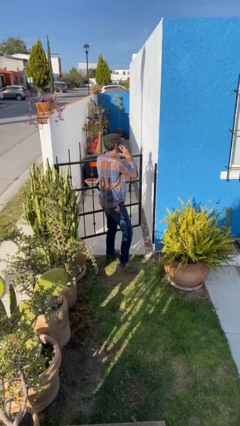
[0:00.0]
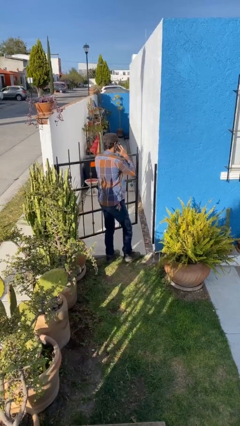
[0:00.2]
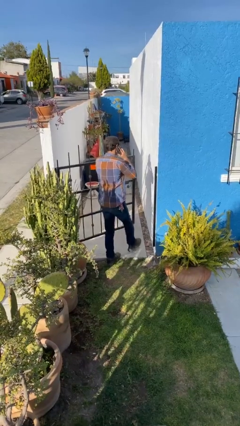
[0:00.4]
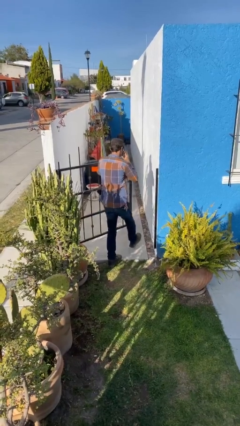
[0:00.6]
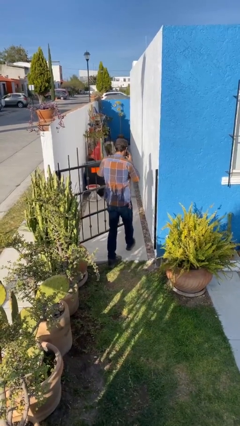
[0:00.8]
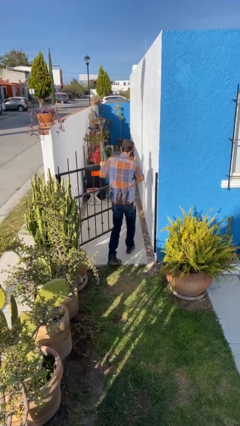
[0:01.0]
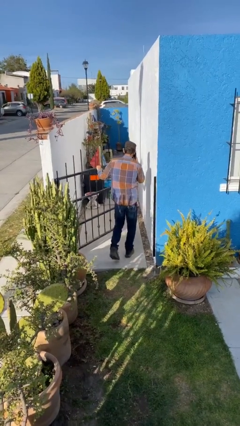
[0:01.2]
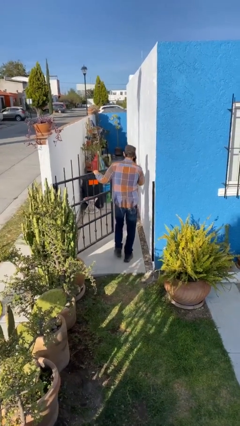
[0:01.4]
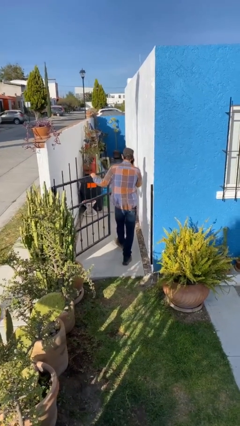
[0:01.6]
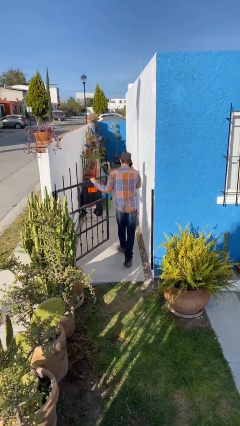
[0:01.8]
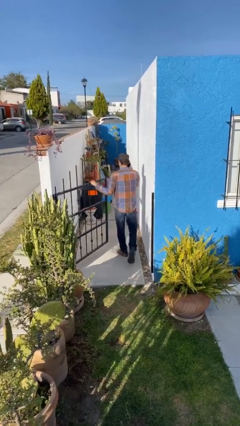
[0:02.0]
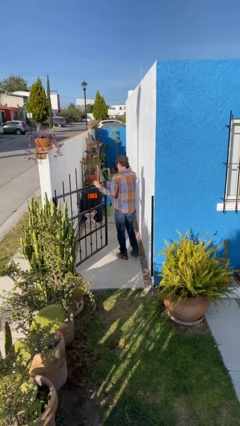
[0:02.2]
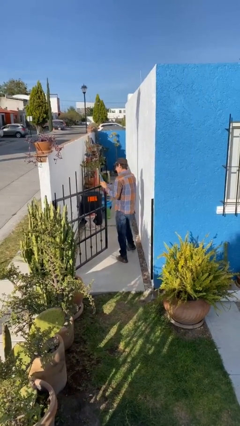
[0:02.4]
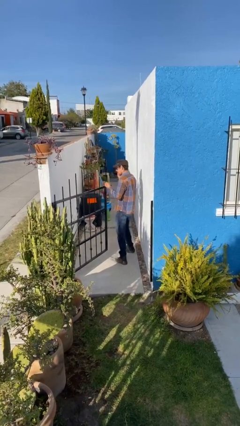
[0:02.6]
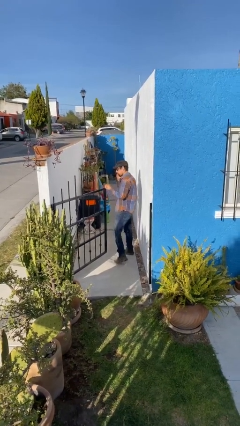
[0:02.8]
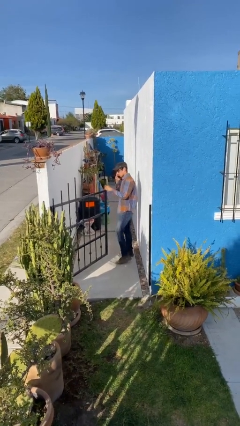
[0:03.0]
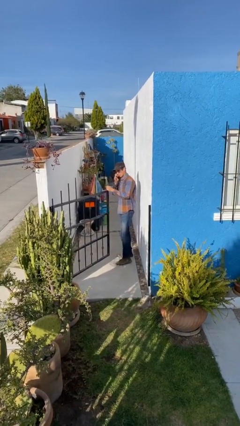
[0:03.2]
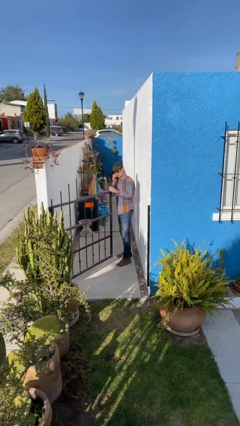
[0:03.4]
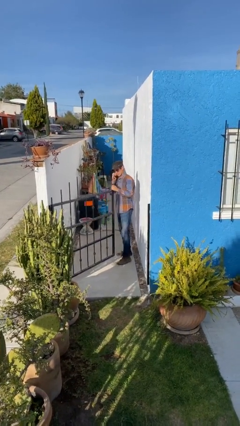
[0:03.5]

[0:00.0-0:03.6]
person exits scene through structure

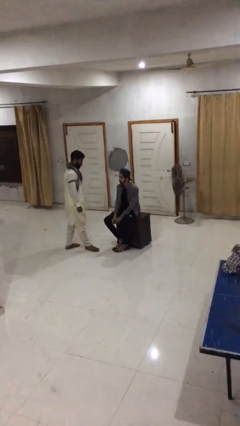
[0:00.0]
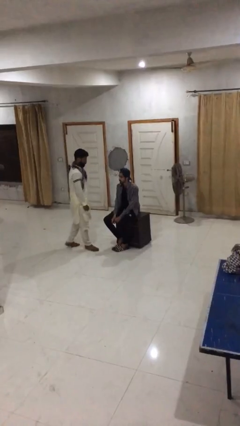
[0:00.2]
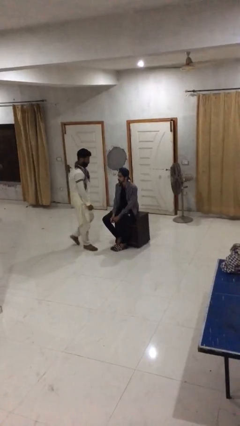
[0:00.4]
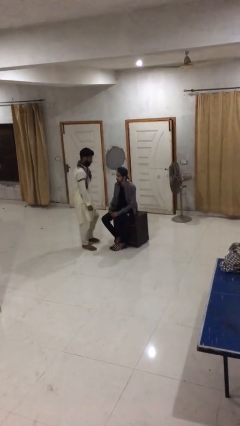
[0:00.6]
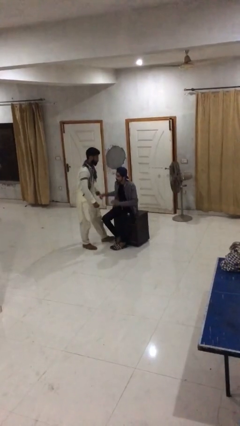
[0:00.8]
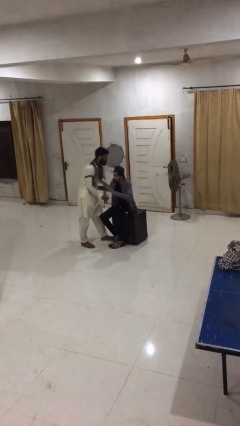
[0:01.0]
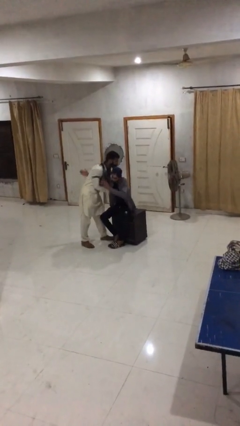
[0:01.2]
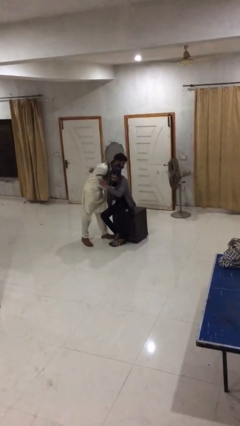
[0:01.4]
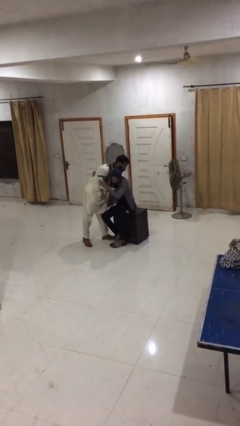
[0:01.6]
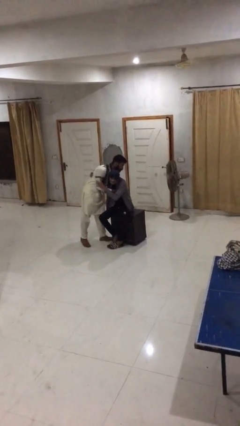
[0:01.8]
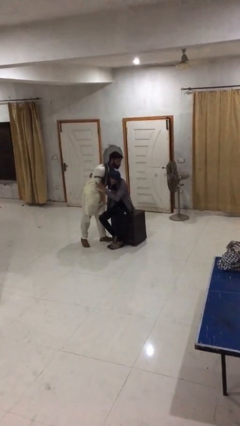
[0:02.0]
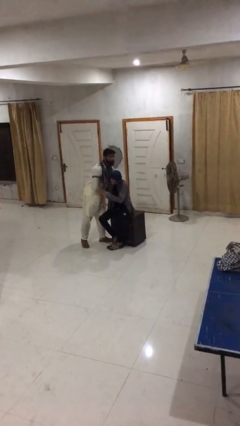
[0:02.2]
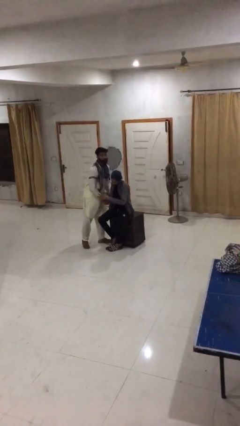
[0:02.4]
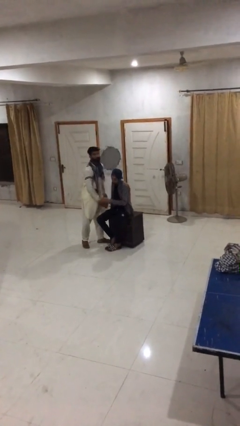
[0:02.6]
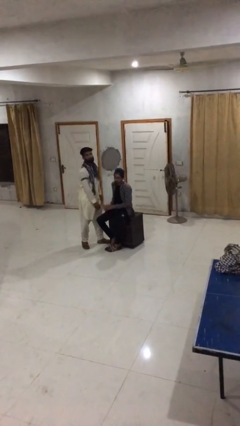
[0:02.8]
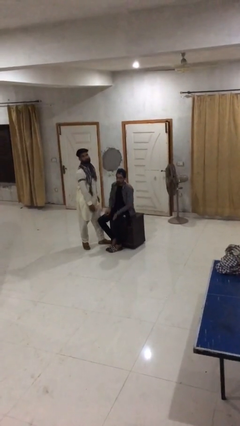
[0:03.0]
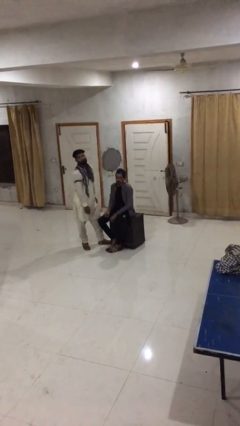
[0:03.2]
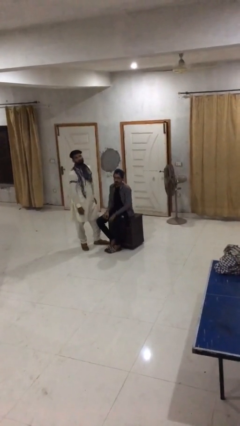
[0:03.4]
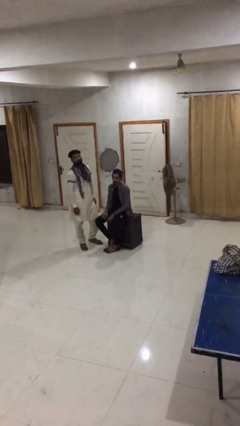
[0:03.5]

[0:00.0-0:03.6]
person embraces person

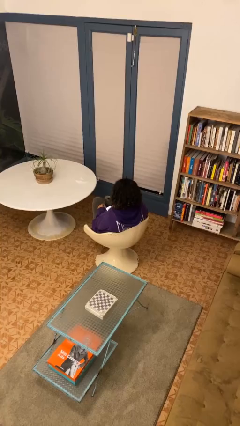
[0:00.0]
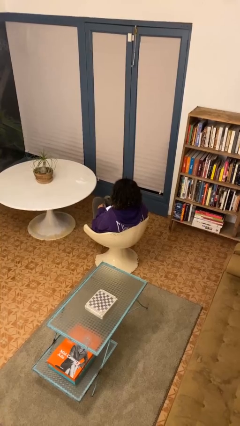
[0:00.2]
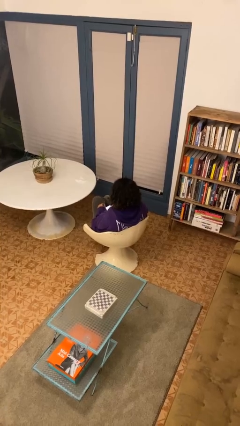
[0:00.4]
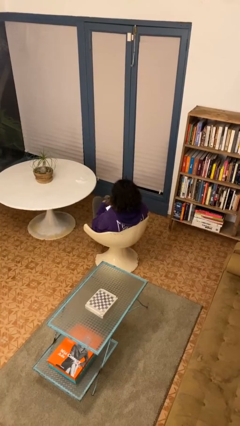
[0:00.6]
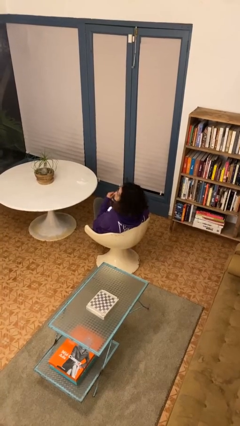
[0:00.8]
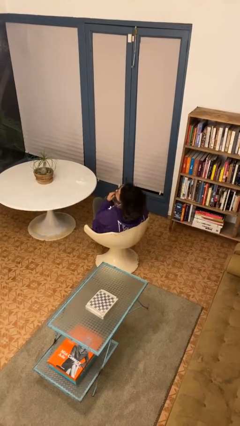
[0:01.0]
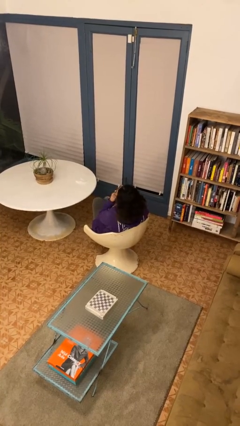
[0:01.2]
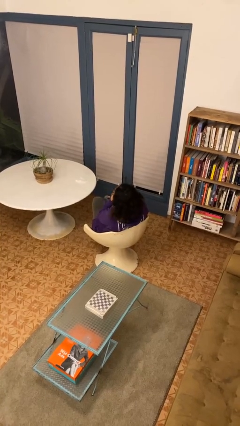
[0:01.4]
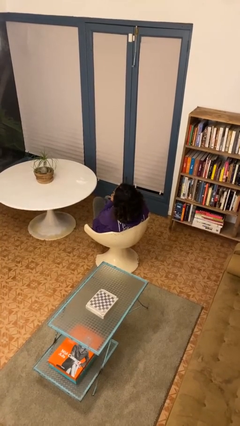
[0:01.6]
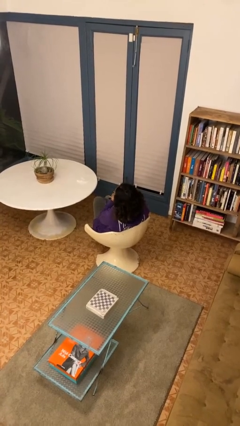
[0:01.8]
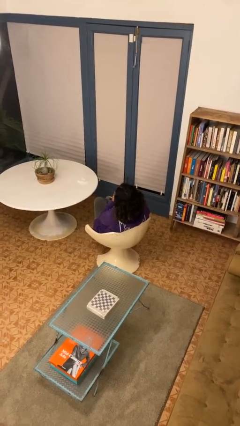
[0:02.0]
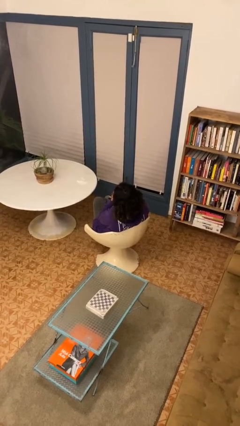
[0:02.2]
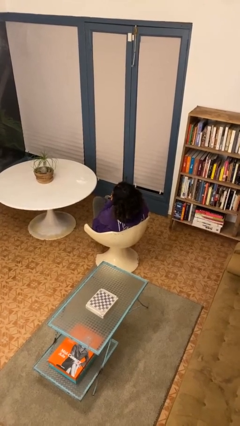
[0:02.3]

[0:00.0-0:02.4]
person strokes chin

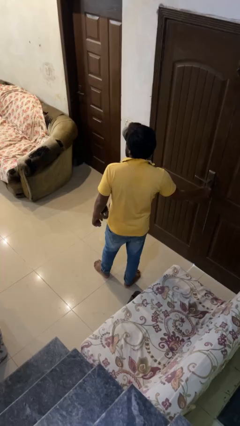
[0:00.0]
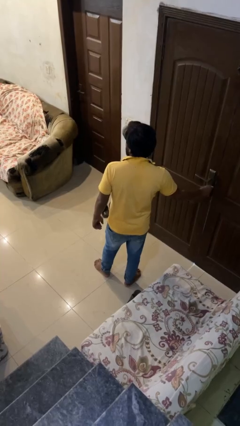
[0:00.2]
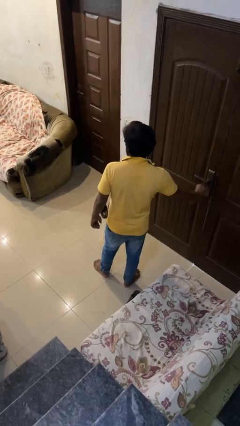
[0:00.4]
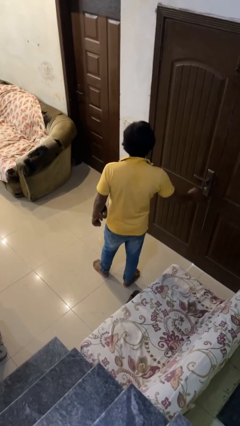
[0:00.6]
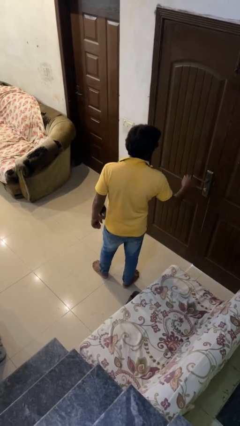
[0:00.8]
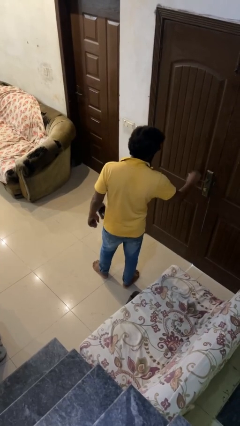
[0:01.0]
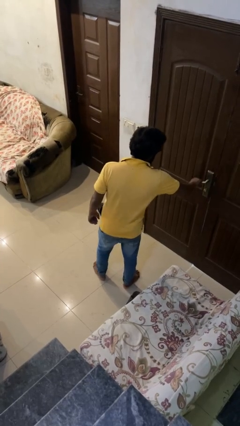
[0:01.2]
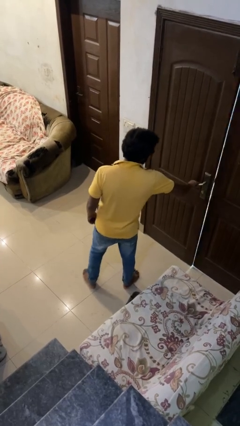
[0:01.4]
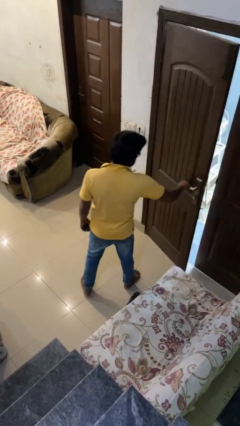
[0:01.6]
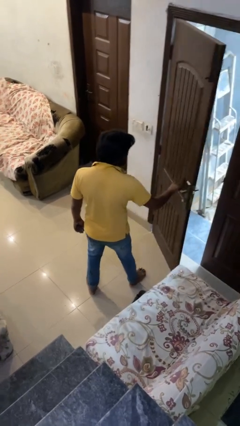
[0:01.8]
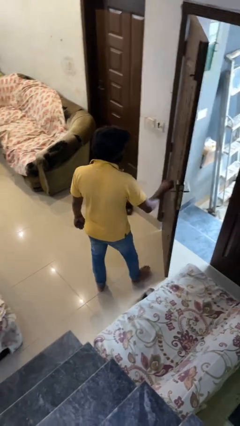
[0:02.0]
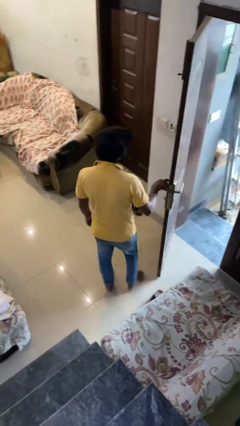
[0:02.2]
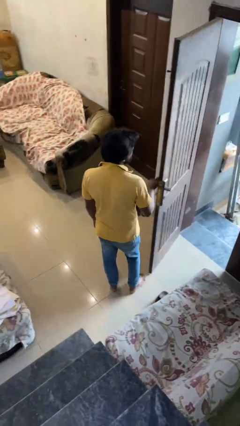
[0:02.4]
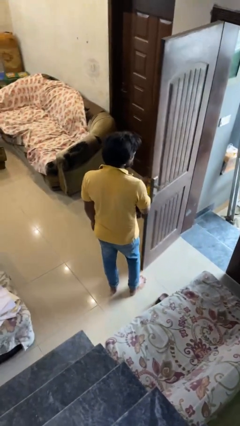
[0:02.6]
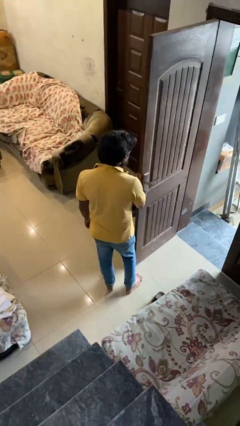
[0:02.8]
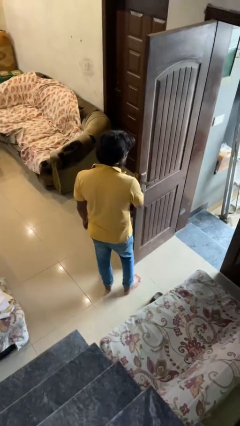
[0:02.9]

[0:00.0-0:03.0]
person opens facility door

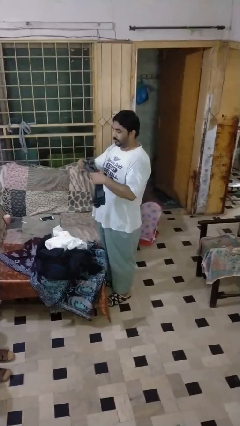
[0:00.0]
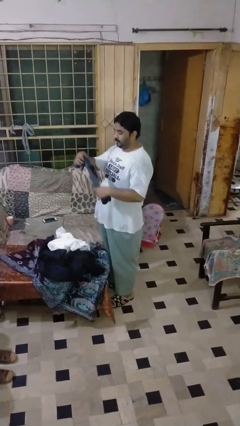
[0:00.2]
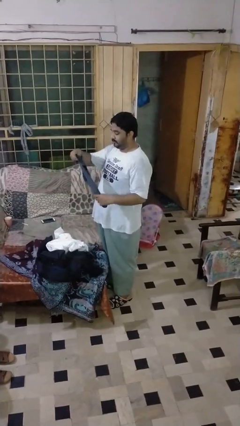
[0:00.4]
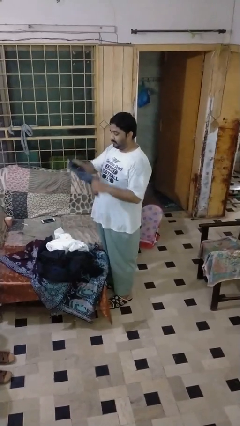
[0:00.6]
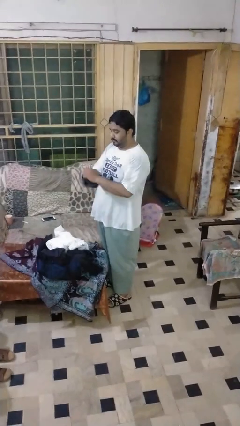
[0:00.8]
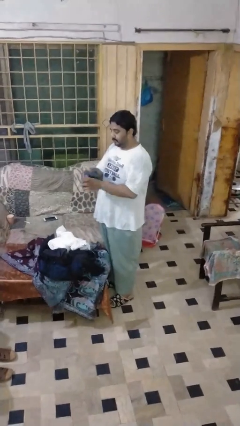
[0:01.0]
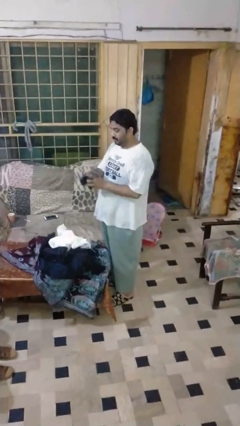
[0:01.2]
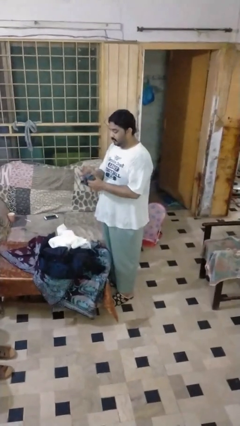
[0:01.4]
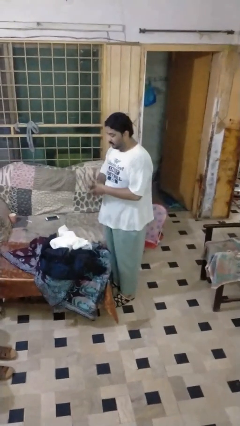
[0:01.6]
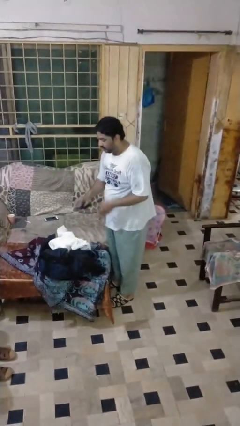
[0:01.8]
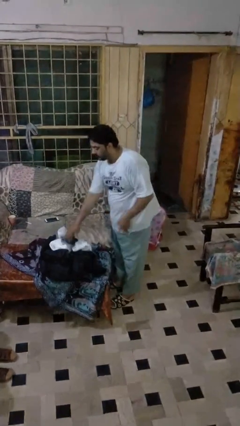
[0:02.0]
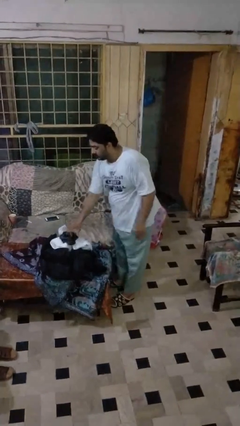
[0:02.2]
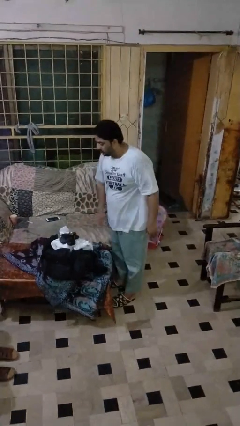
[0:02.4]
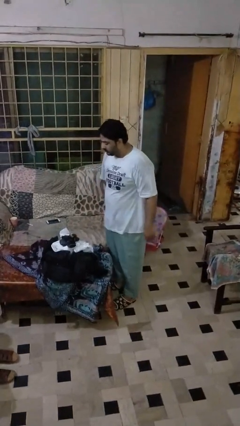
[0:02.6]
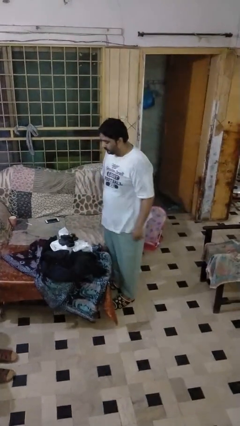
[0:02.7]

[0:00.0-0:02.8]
person folds socks

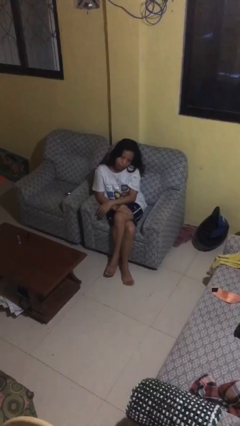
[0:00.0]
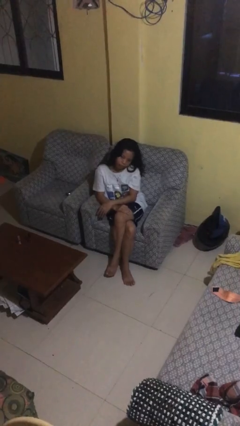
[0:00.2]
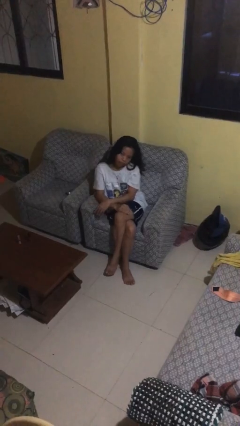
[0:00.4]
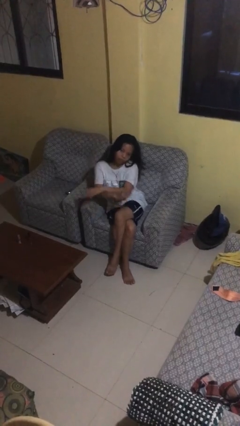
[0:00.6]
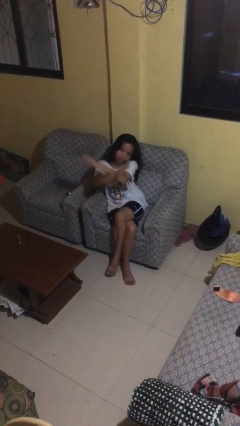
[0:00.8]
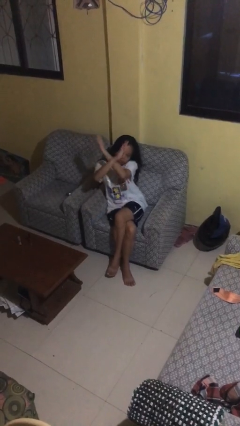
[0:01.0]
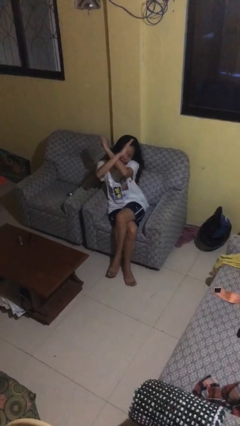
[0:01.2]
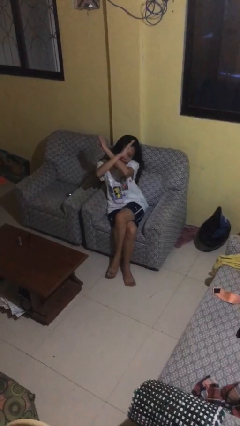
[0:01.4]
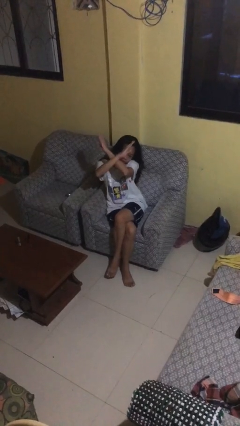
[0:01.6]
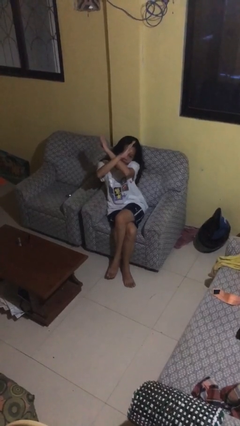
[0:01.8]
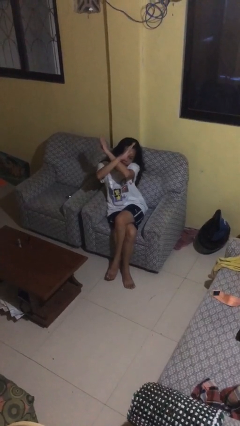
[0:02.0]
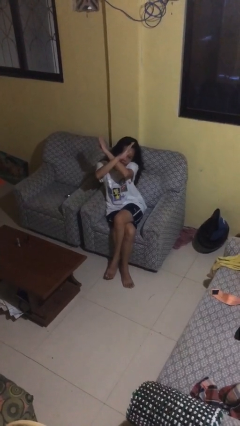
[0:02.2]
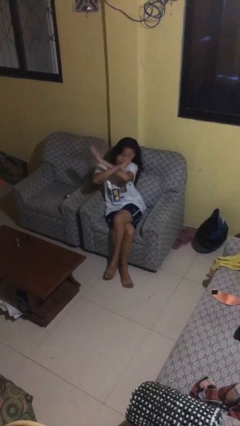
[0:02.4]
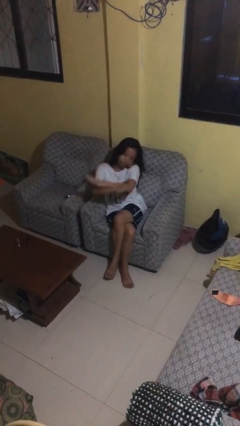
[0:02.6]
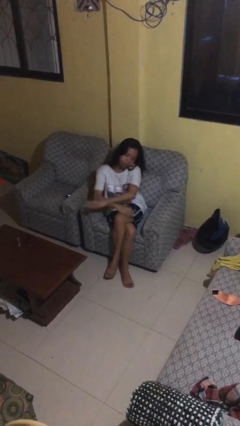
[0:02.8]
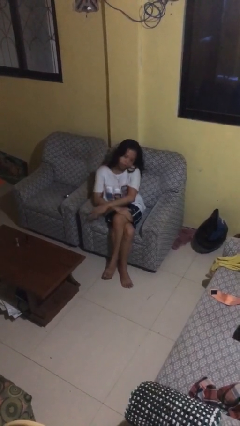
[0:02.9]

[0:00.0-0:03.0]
person gestures arms x
